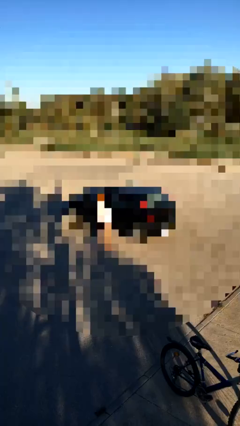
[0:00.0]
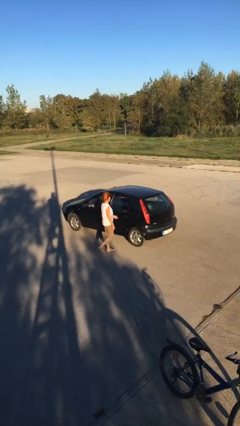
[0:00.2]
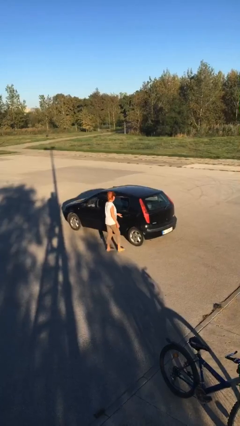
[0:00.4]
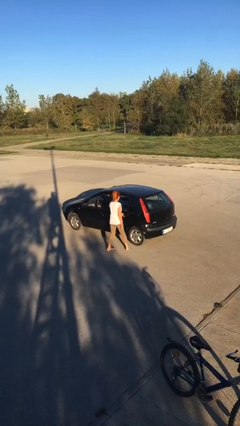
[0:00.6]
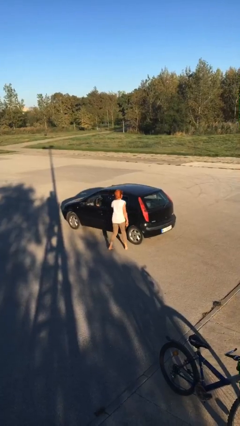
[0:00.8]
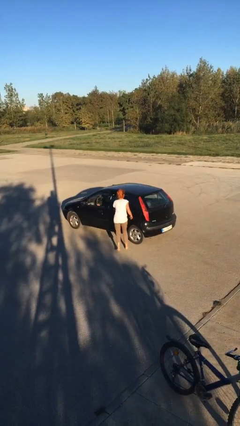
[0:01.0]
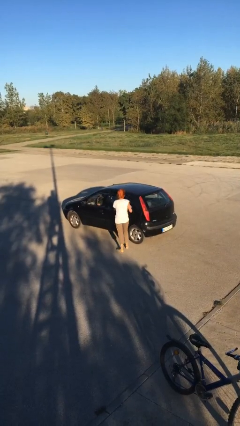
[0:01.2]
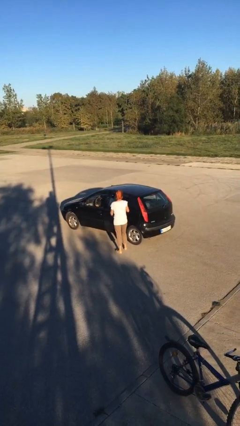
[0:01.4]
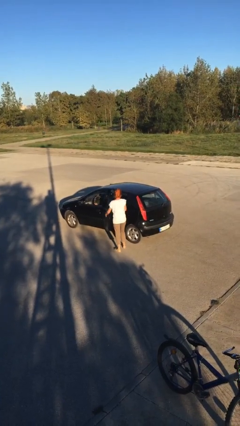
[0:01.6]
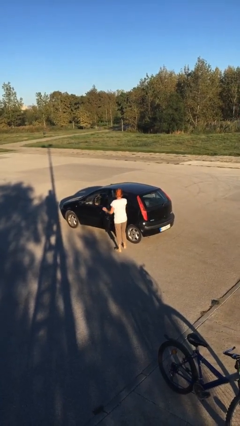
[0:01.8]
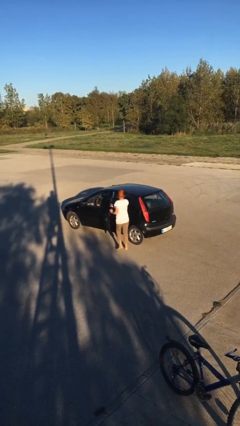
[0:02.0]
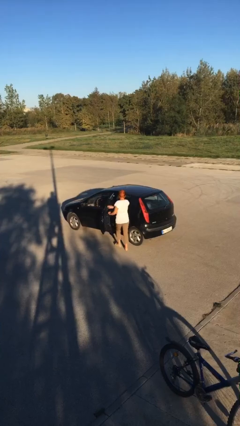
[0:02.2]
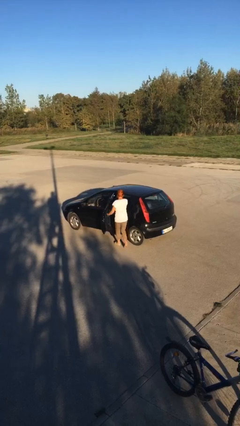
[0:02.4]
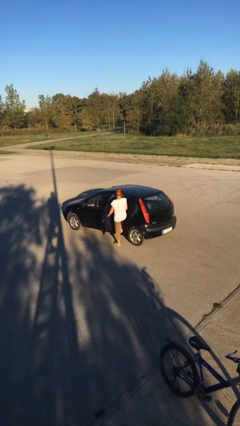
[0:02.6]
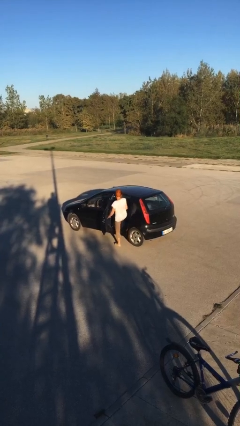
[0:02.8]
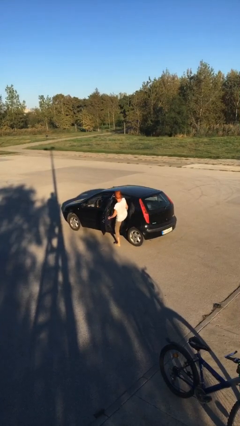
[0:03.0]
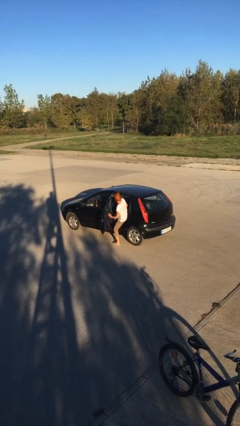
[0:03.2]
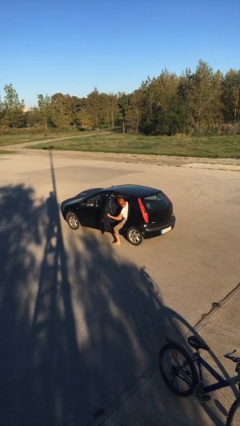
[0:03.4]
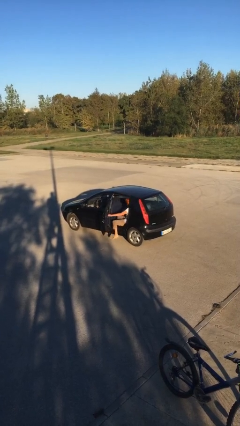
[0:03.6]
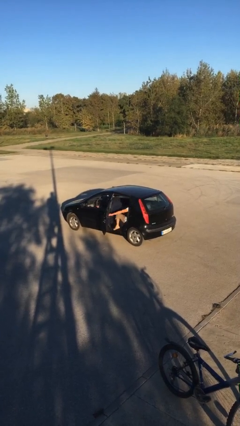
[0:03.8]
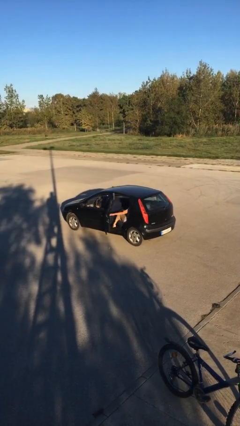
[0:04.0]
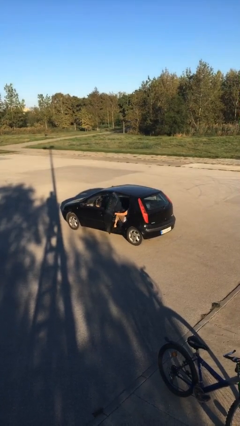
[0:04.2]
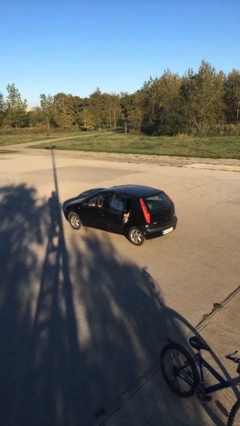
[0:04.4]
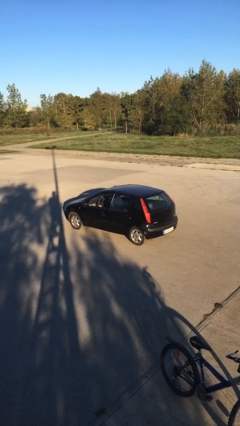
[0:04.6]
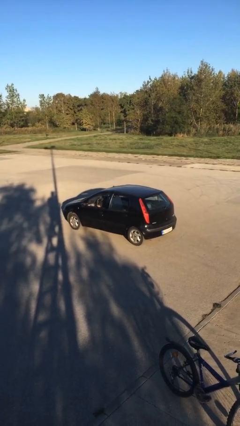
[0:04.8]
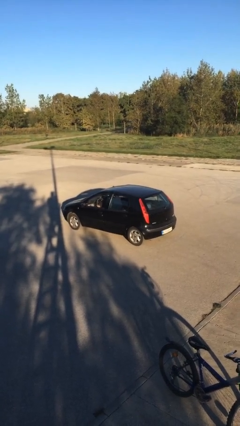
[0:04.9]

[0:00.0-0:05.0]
car picks up person

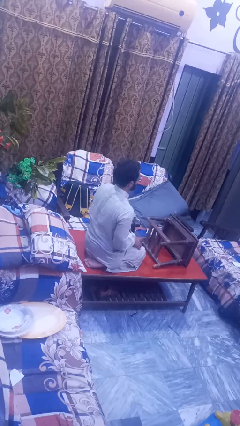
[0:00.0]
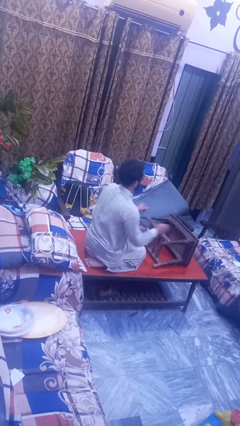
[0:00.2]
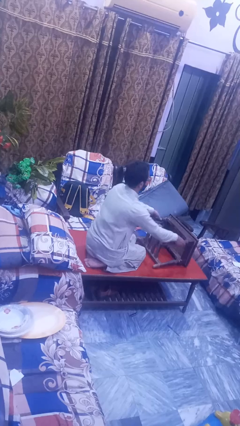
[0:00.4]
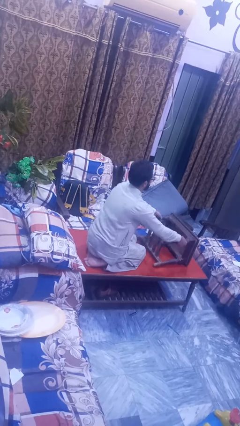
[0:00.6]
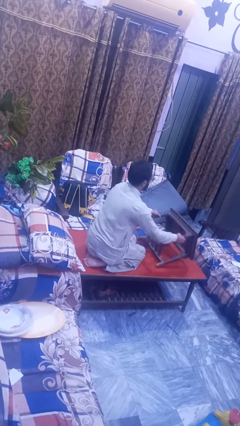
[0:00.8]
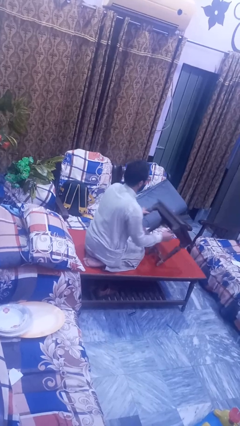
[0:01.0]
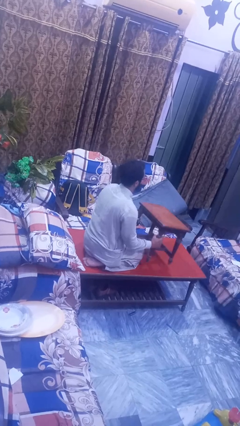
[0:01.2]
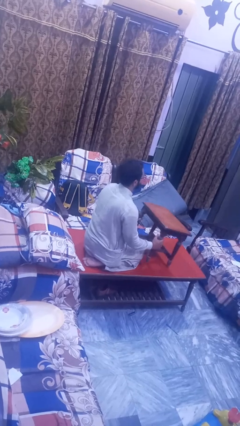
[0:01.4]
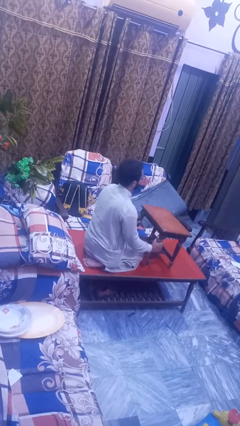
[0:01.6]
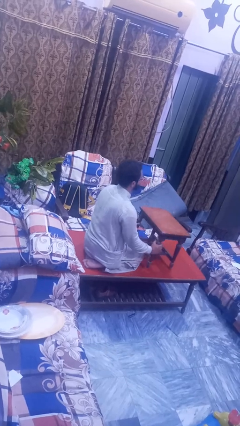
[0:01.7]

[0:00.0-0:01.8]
person sets upright furniture

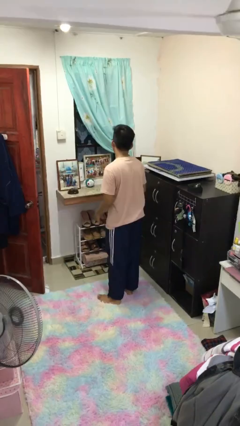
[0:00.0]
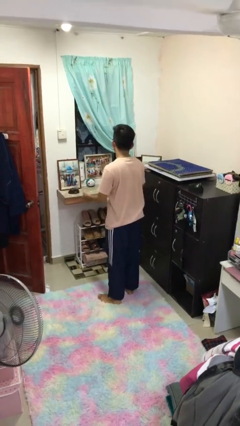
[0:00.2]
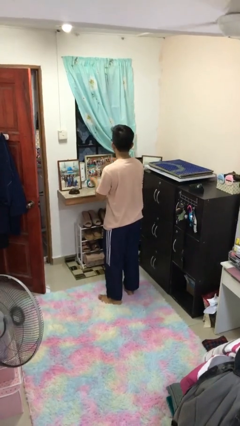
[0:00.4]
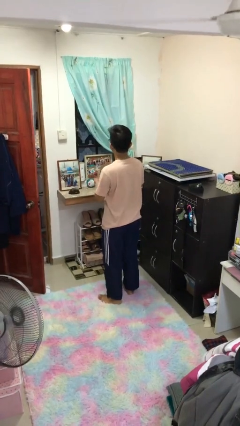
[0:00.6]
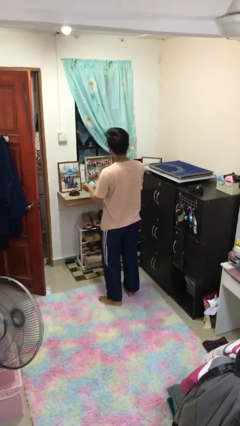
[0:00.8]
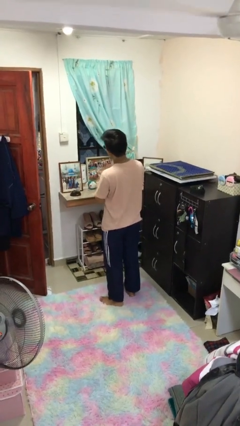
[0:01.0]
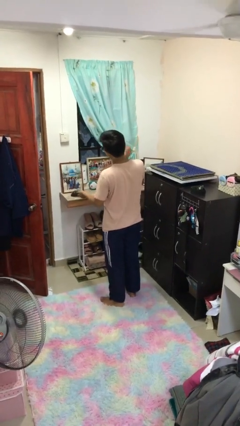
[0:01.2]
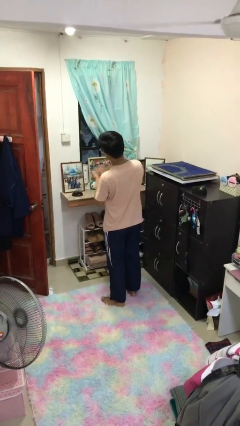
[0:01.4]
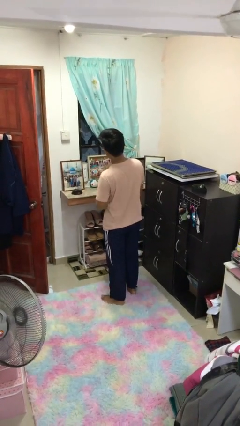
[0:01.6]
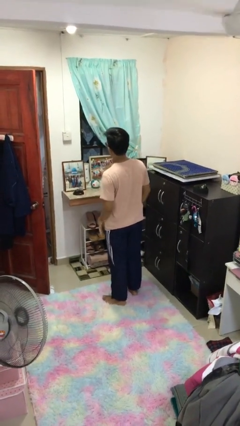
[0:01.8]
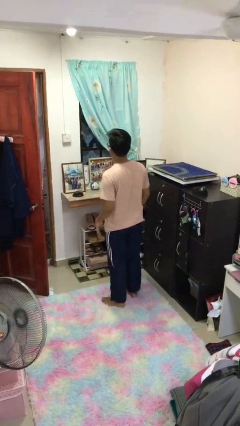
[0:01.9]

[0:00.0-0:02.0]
person claps hands

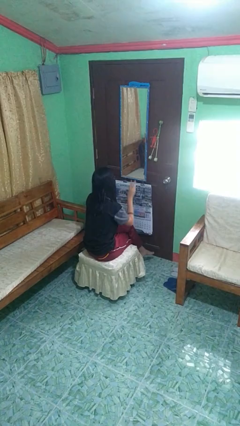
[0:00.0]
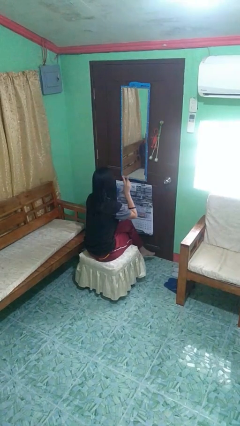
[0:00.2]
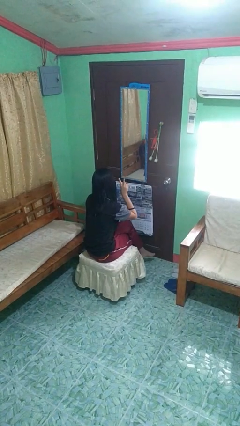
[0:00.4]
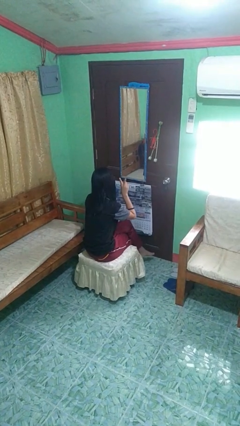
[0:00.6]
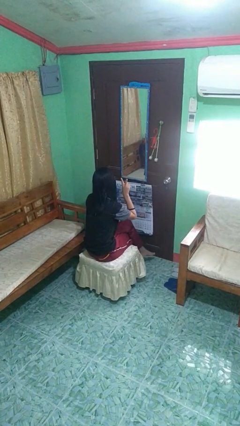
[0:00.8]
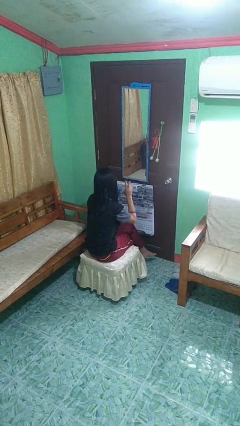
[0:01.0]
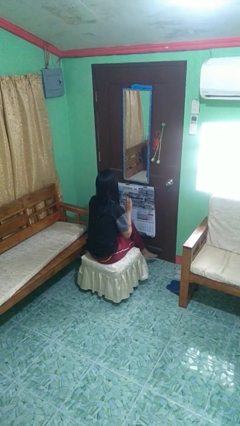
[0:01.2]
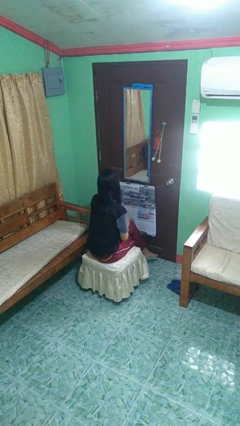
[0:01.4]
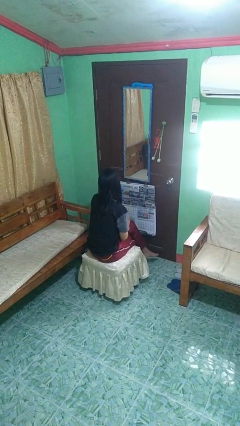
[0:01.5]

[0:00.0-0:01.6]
person gestures peace

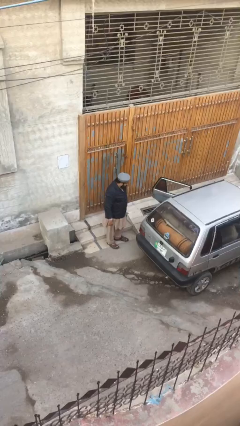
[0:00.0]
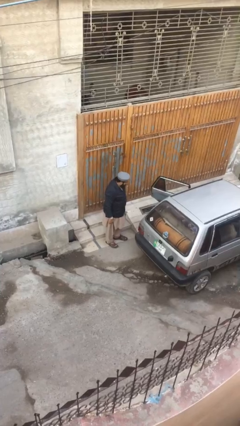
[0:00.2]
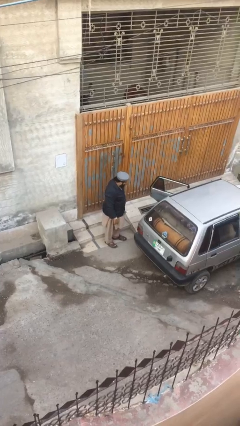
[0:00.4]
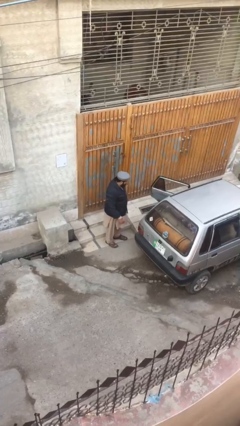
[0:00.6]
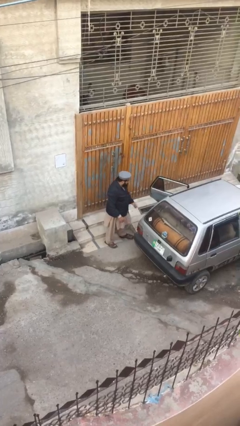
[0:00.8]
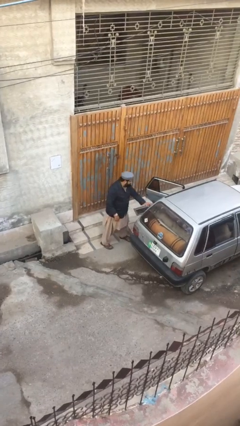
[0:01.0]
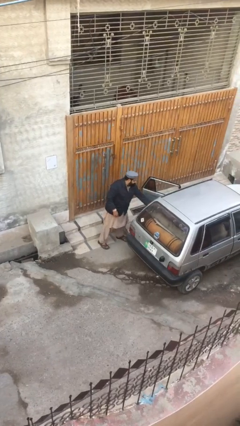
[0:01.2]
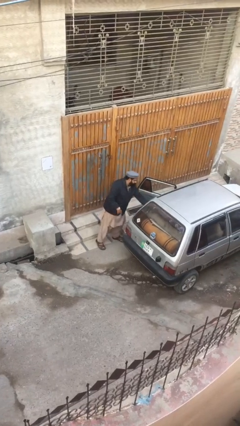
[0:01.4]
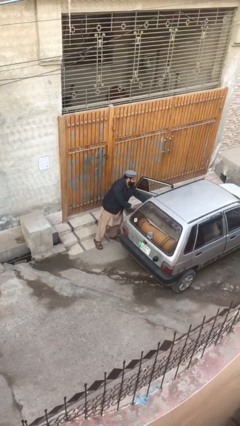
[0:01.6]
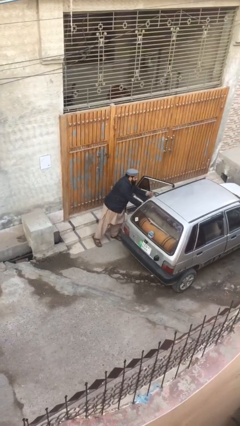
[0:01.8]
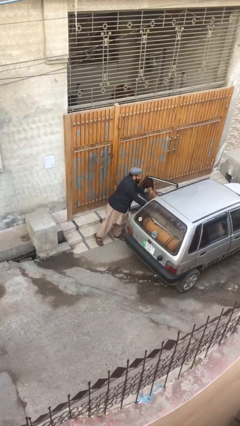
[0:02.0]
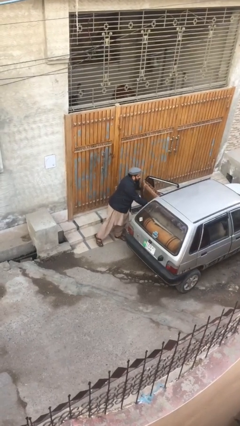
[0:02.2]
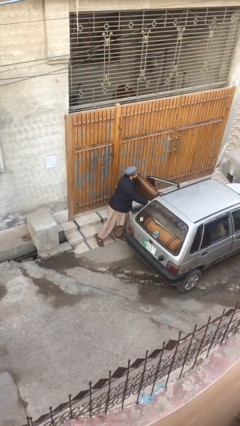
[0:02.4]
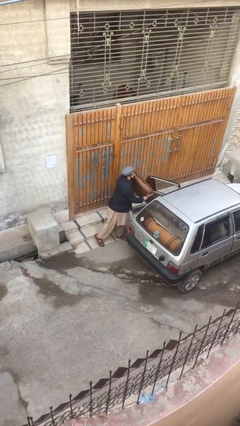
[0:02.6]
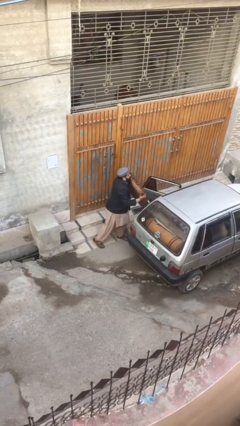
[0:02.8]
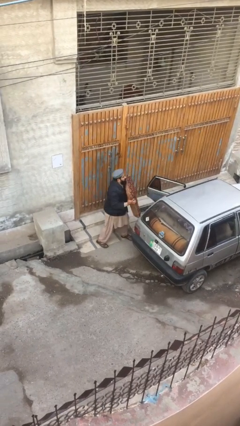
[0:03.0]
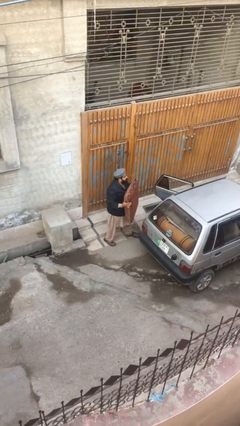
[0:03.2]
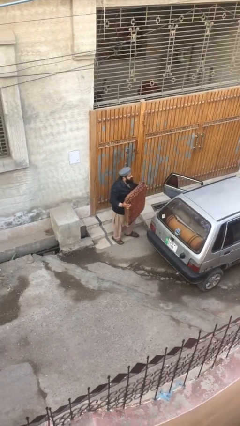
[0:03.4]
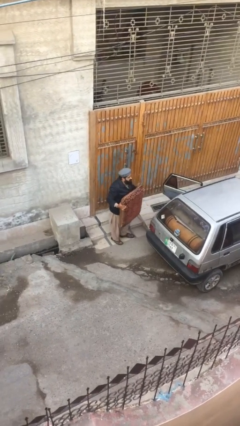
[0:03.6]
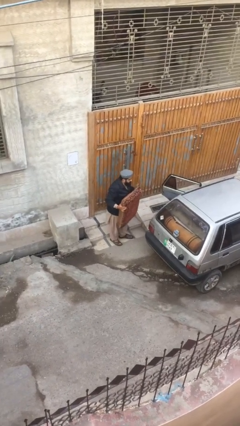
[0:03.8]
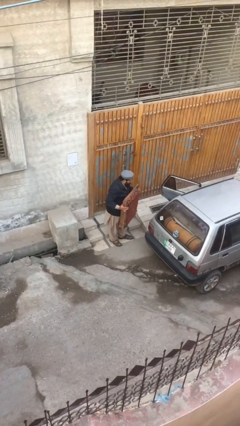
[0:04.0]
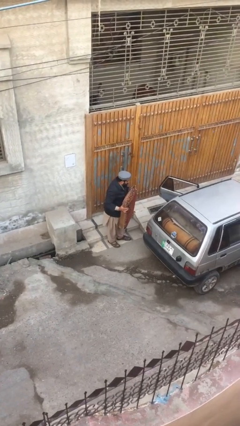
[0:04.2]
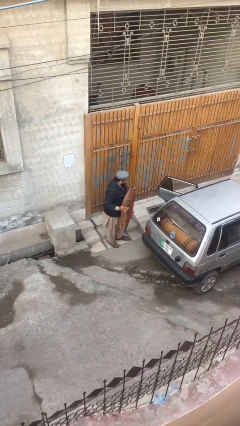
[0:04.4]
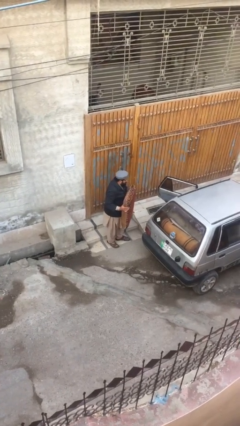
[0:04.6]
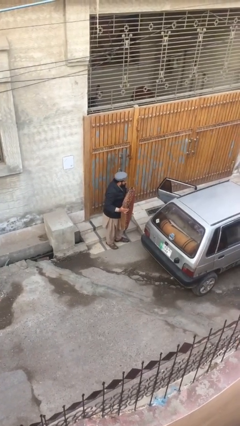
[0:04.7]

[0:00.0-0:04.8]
person unloads car

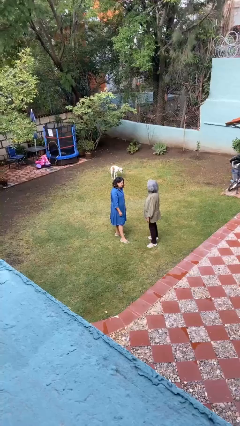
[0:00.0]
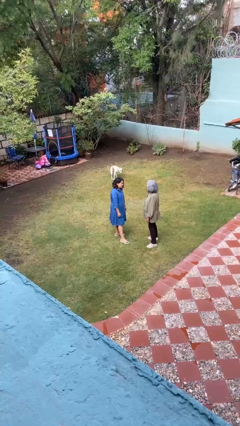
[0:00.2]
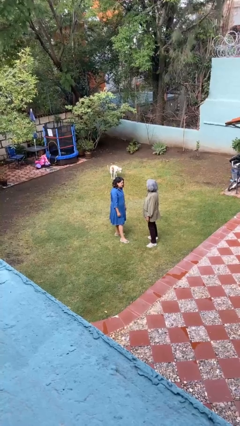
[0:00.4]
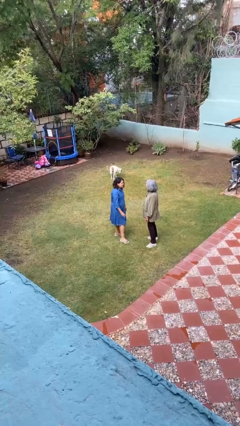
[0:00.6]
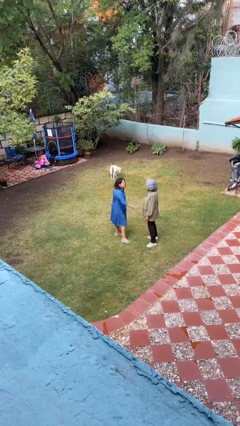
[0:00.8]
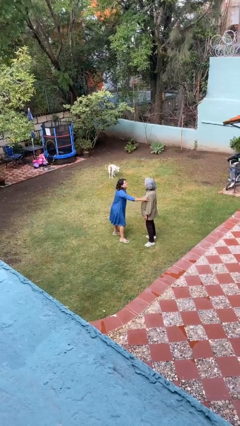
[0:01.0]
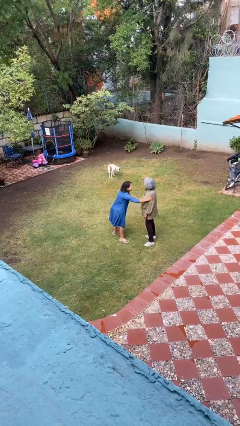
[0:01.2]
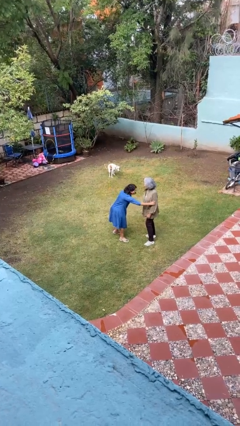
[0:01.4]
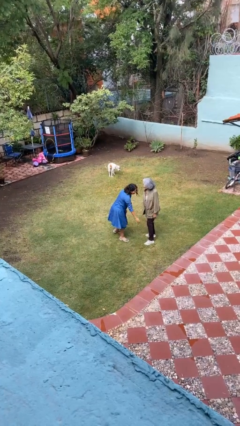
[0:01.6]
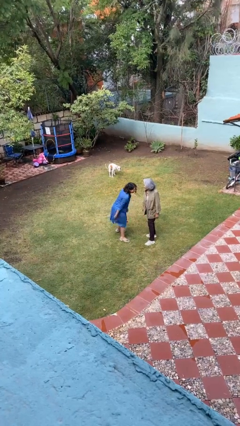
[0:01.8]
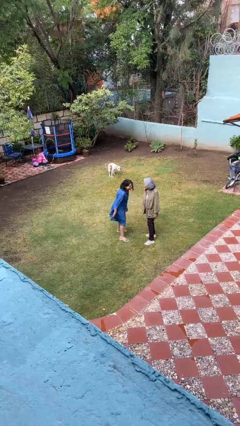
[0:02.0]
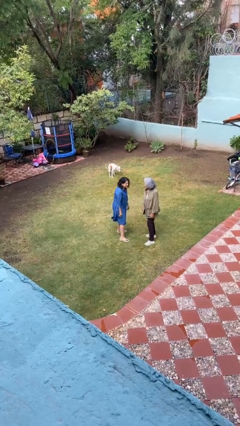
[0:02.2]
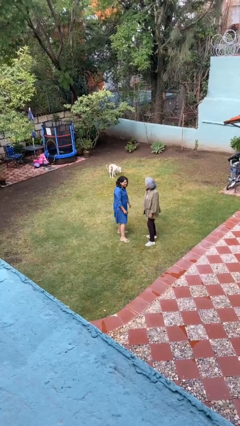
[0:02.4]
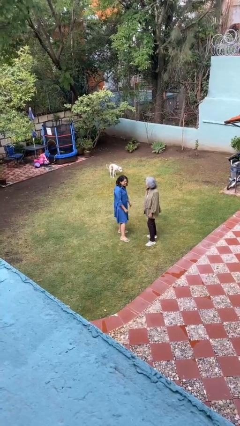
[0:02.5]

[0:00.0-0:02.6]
person shoves person

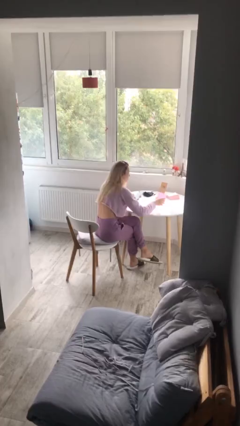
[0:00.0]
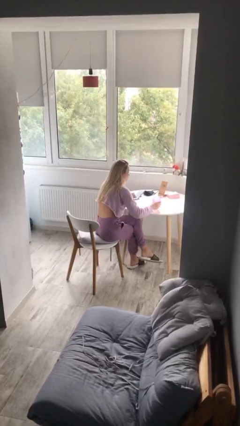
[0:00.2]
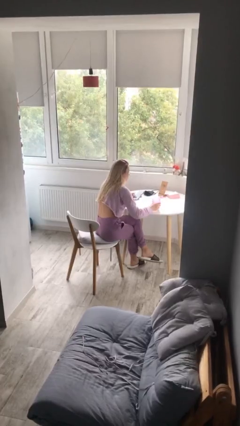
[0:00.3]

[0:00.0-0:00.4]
person sets upright glass
